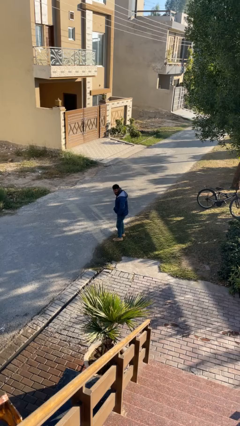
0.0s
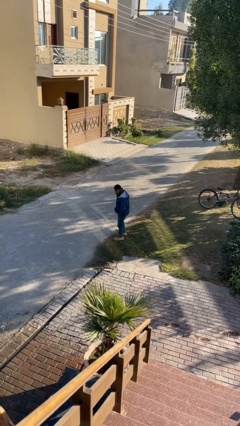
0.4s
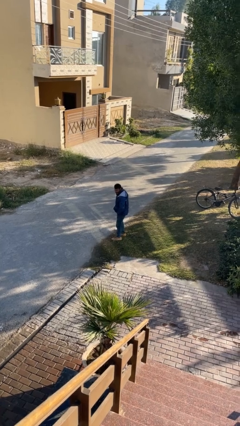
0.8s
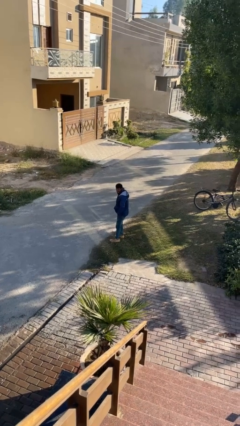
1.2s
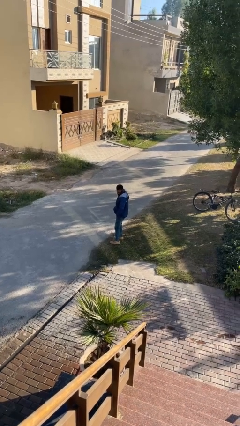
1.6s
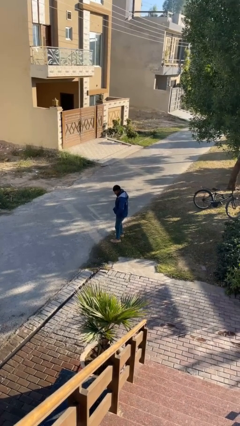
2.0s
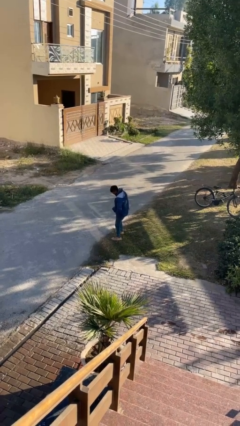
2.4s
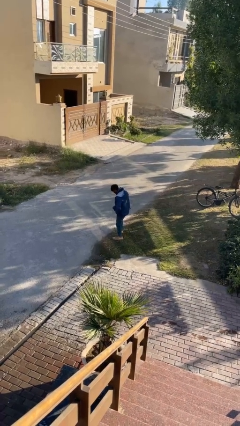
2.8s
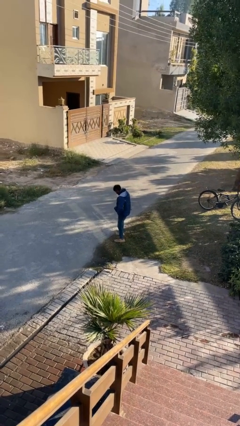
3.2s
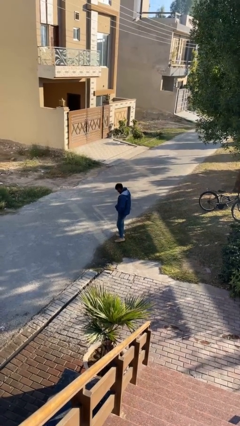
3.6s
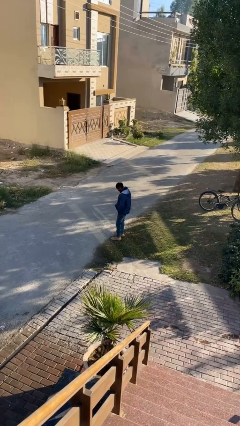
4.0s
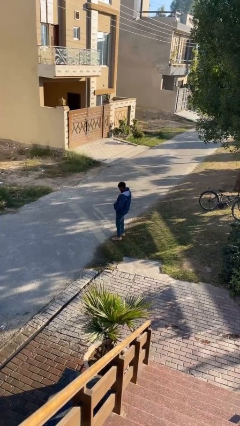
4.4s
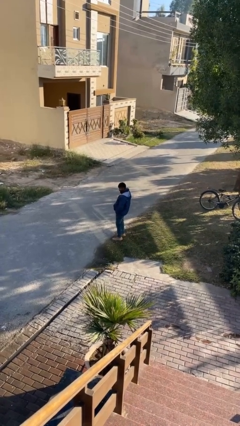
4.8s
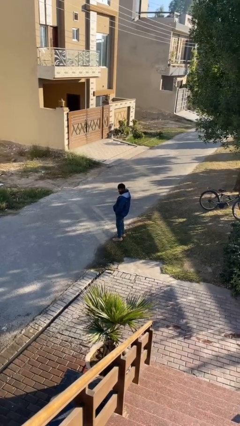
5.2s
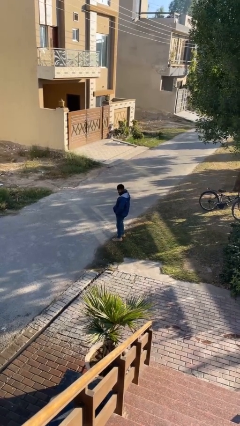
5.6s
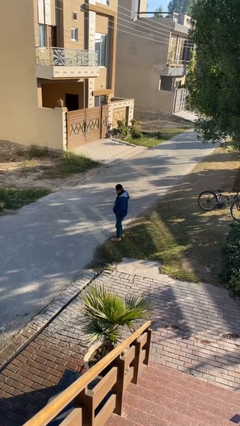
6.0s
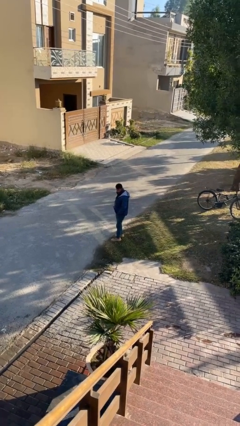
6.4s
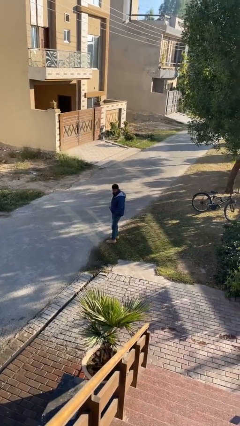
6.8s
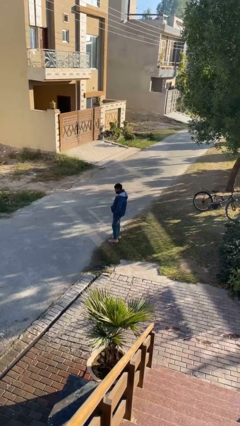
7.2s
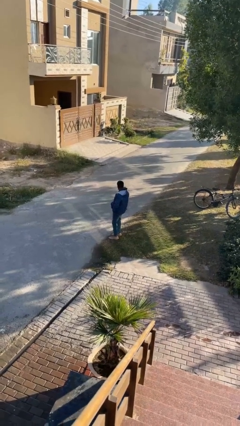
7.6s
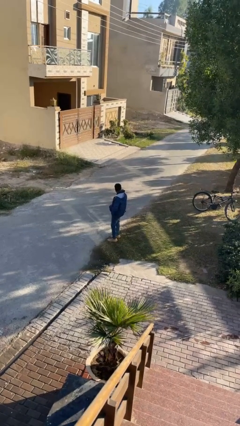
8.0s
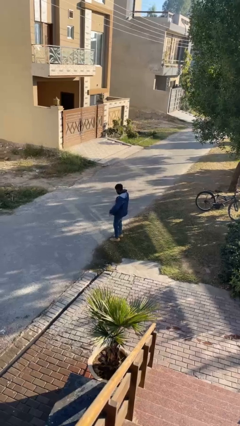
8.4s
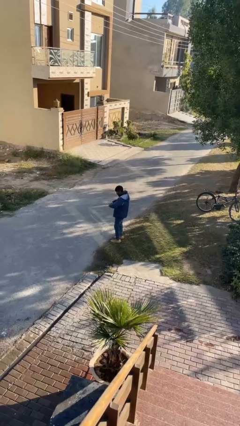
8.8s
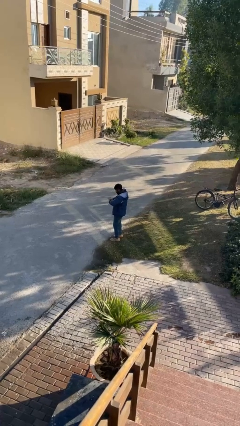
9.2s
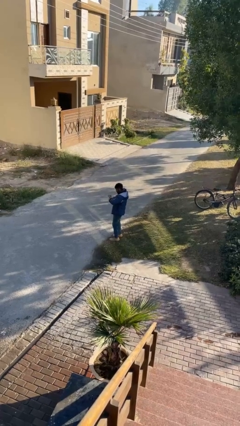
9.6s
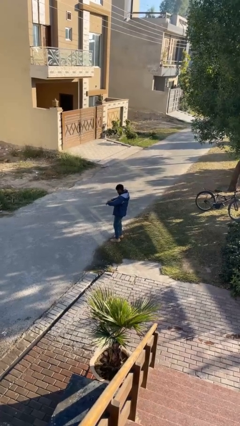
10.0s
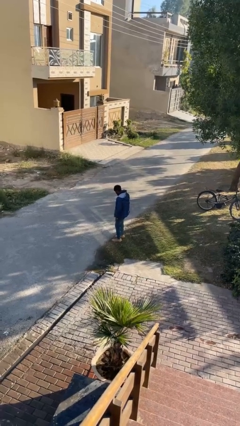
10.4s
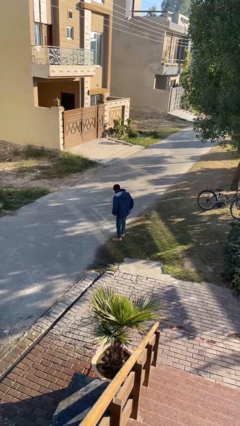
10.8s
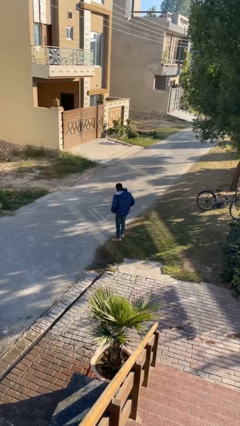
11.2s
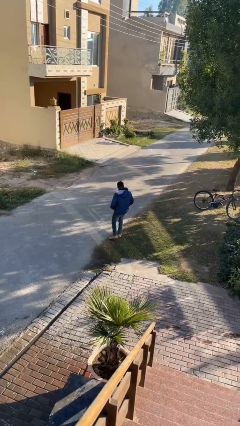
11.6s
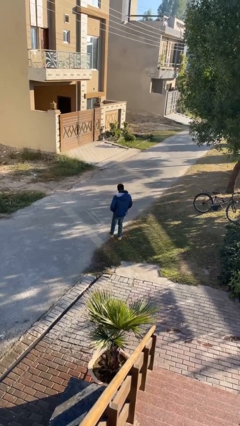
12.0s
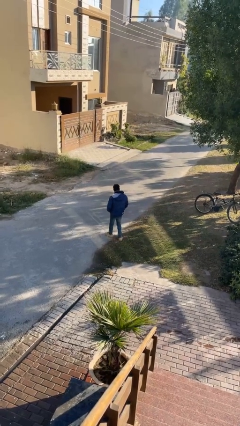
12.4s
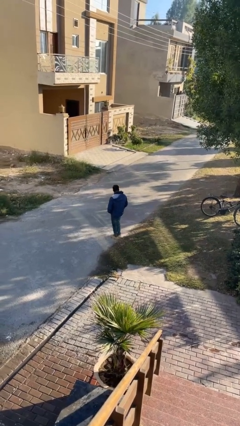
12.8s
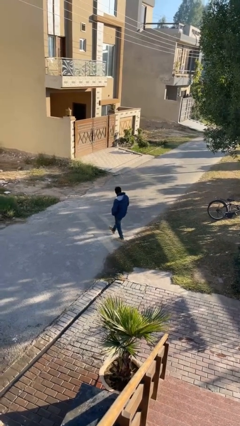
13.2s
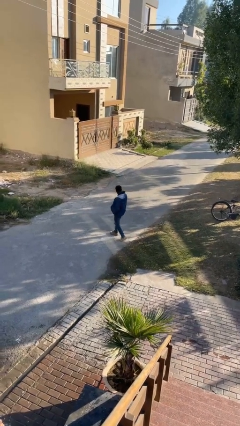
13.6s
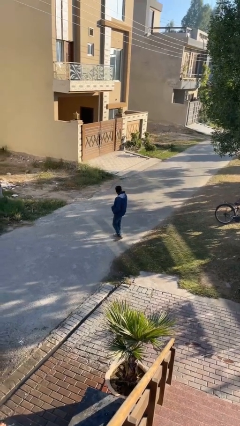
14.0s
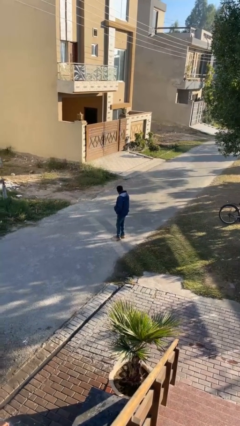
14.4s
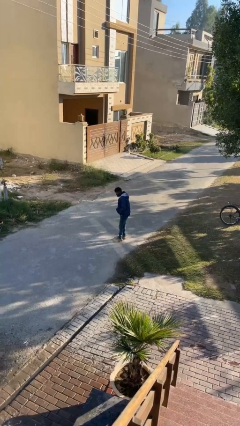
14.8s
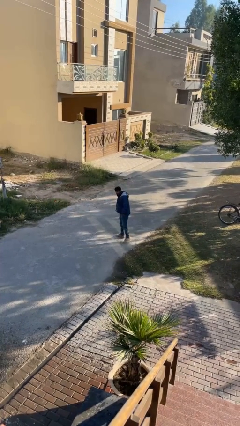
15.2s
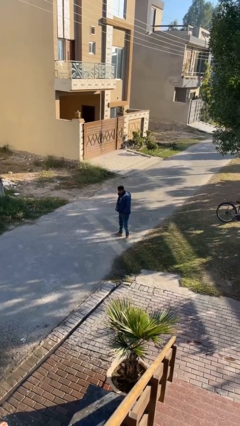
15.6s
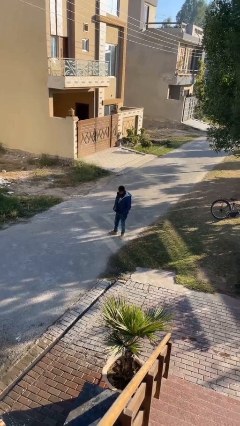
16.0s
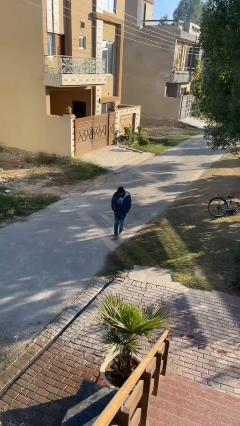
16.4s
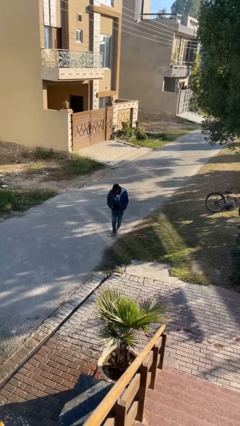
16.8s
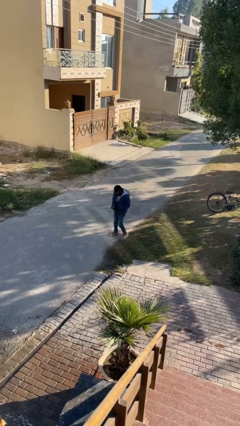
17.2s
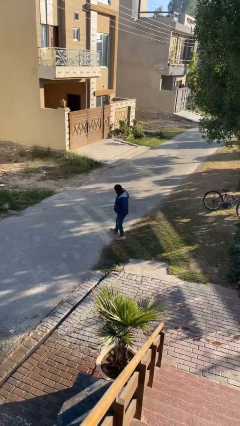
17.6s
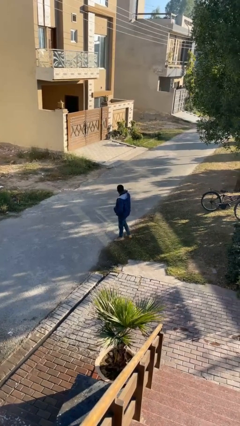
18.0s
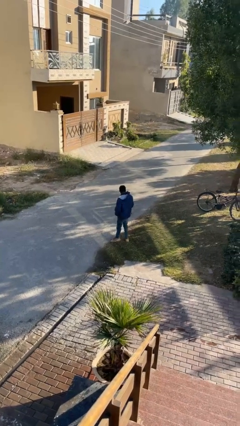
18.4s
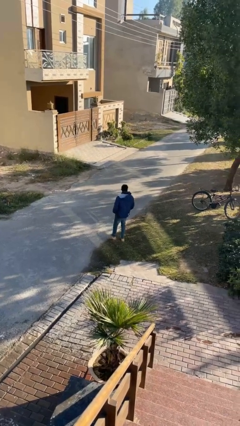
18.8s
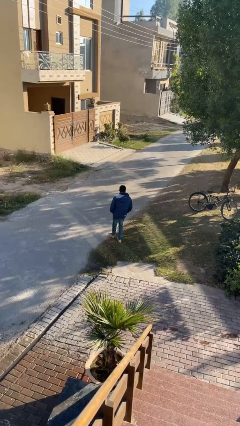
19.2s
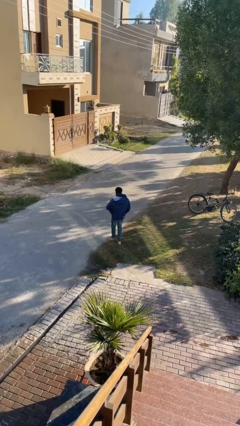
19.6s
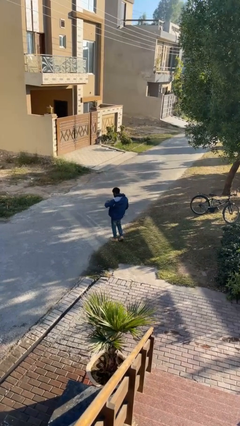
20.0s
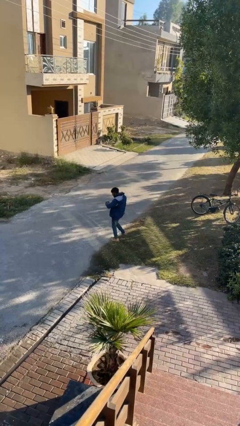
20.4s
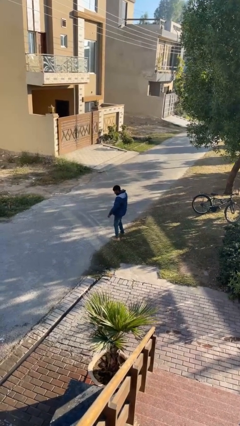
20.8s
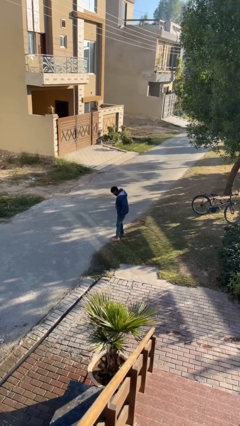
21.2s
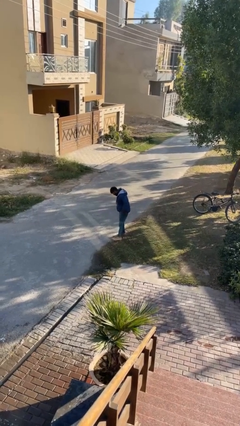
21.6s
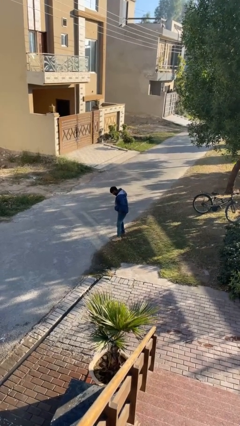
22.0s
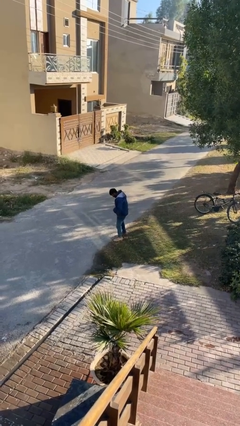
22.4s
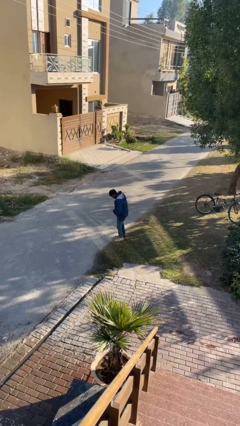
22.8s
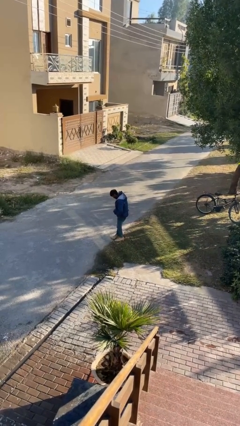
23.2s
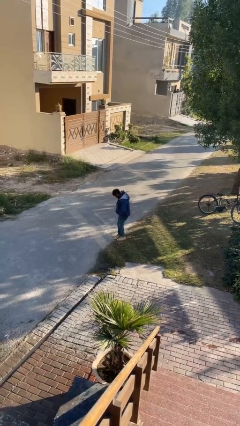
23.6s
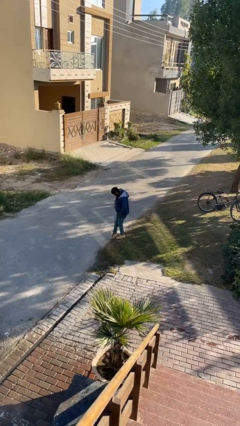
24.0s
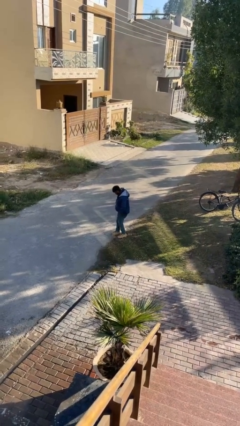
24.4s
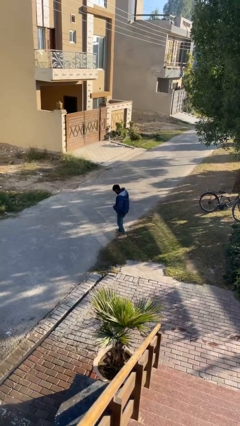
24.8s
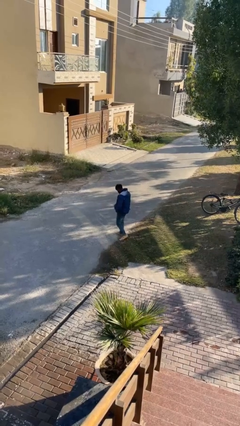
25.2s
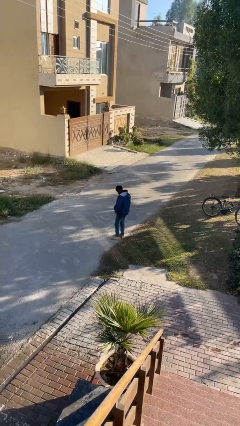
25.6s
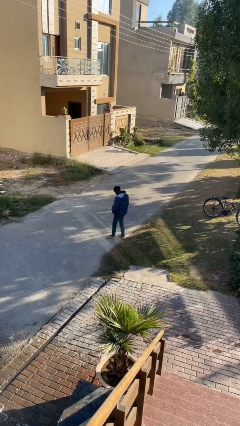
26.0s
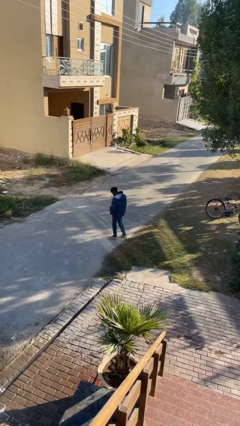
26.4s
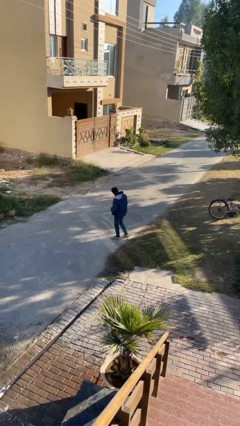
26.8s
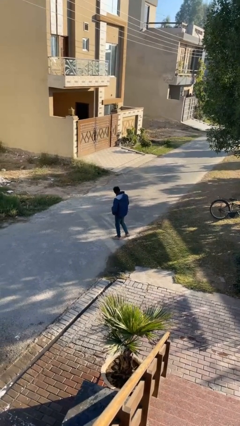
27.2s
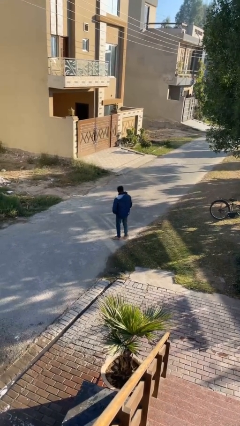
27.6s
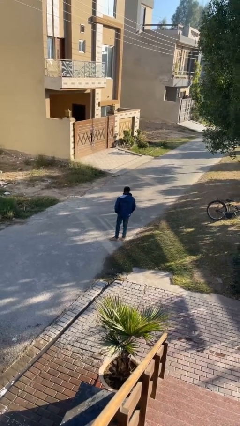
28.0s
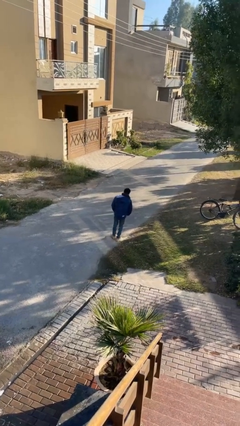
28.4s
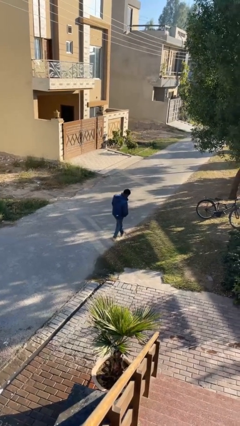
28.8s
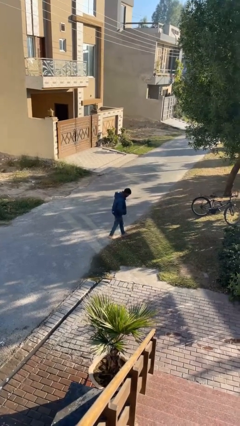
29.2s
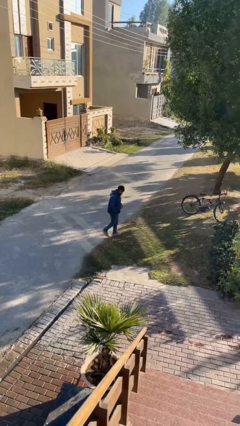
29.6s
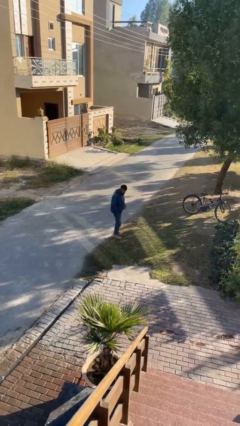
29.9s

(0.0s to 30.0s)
person walks

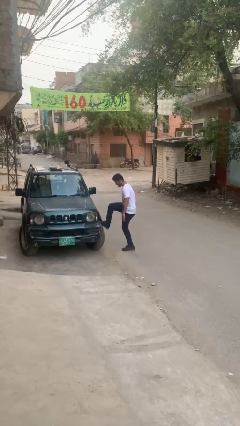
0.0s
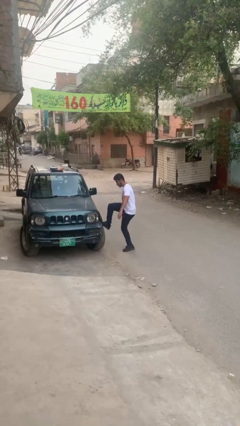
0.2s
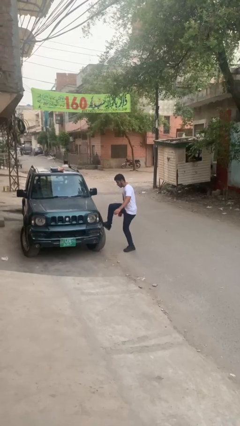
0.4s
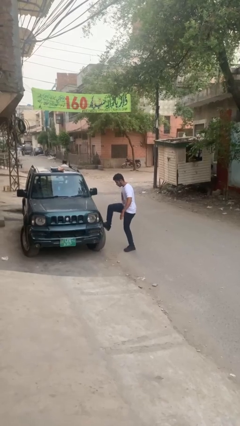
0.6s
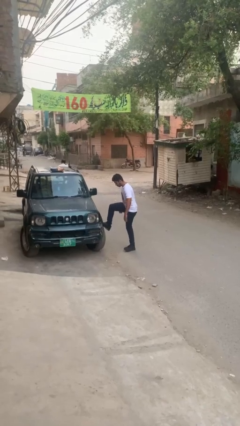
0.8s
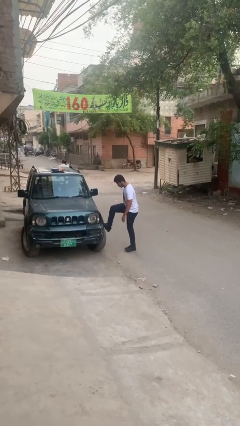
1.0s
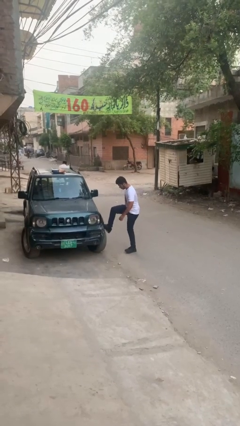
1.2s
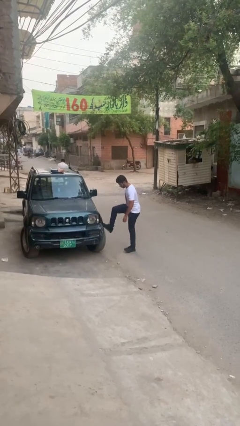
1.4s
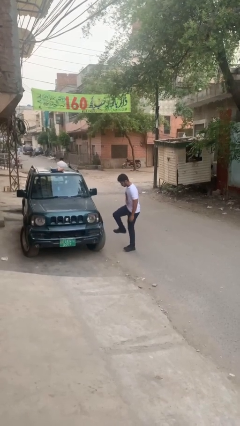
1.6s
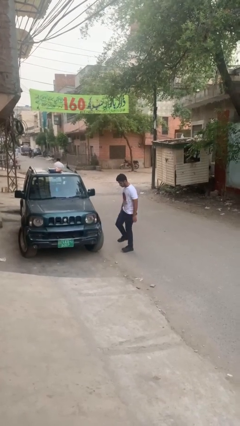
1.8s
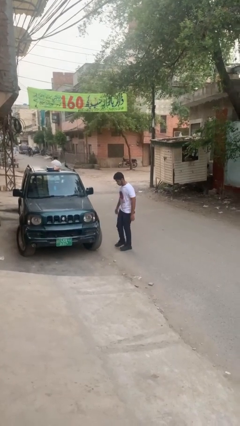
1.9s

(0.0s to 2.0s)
person kicks car tires

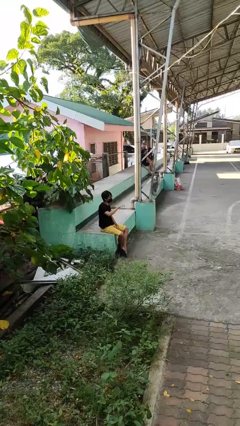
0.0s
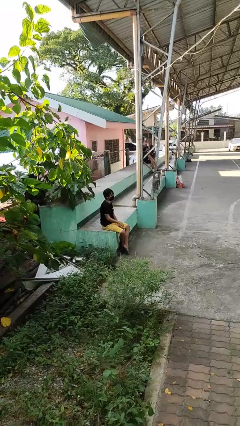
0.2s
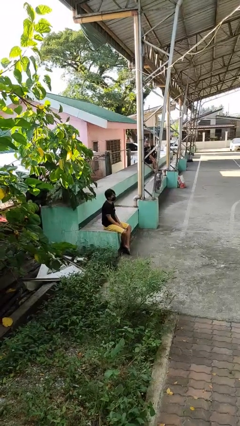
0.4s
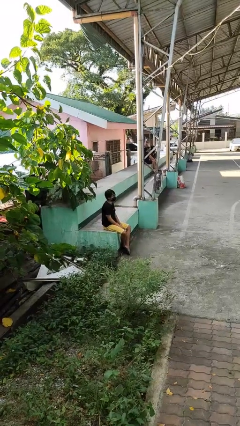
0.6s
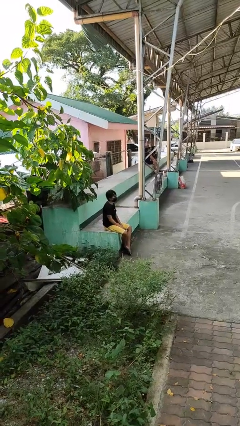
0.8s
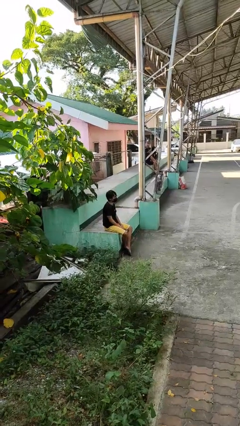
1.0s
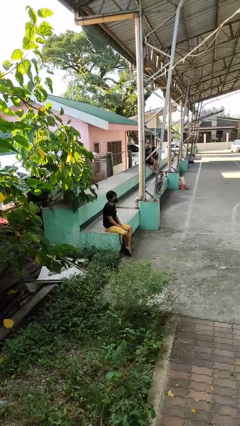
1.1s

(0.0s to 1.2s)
person gestures lower hand
